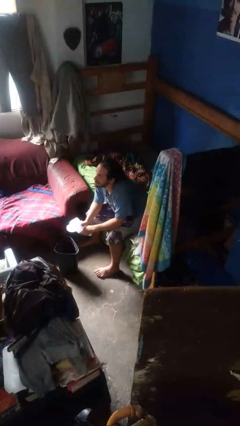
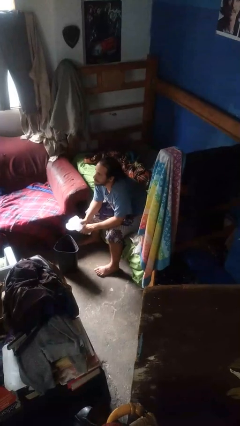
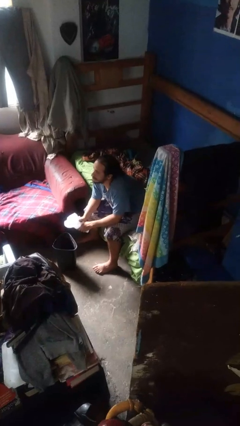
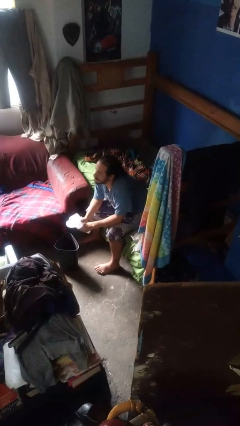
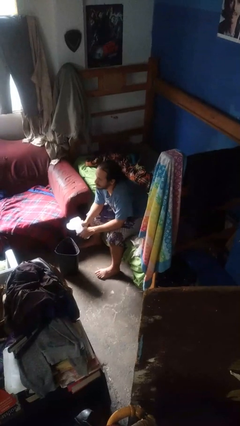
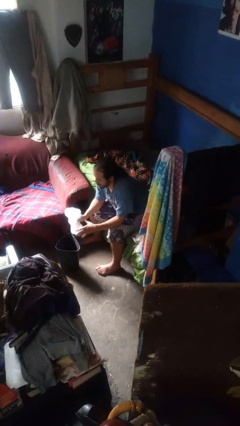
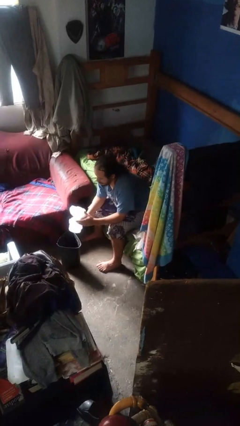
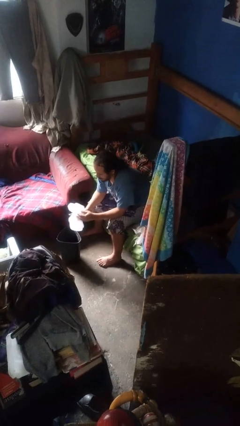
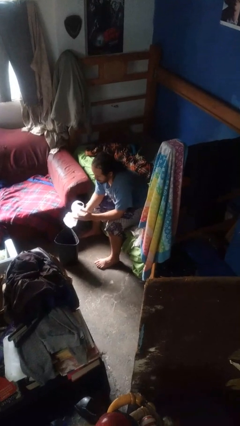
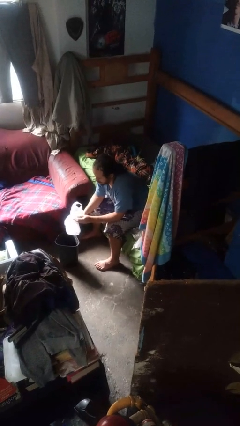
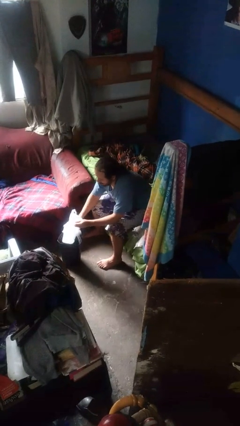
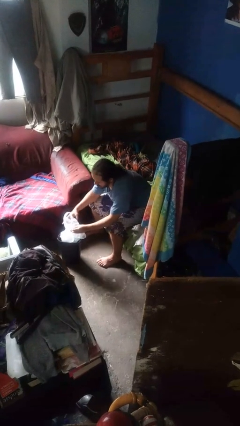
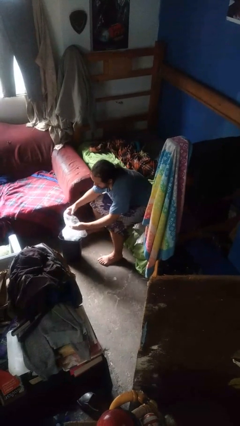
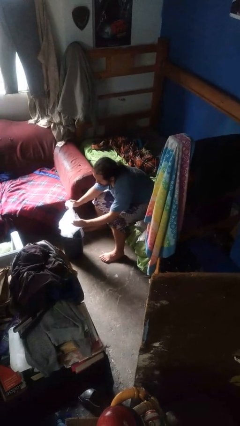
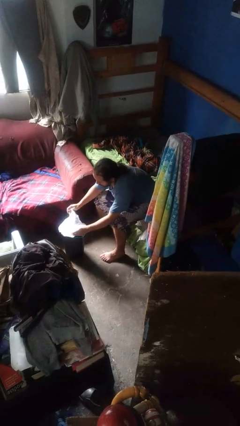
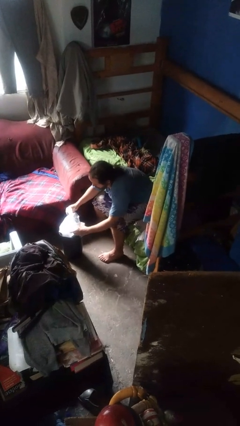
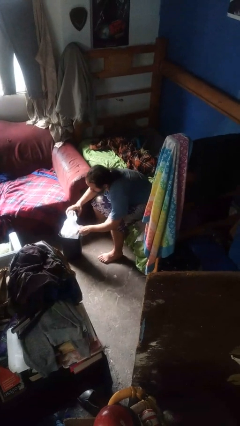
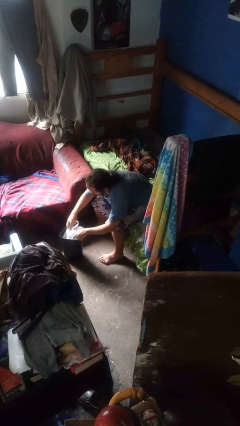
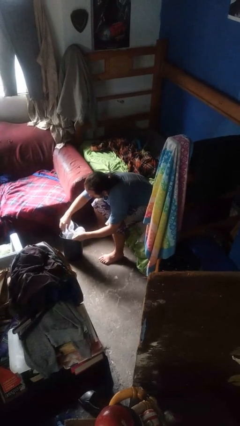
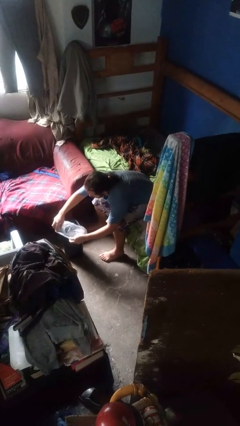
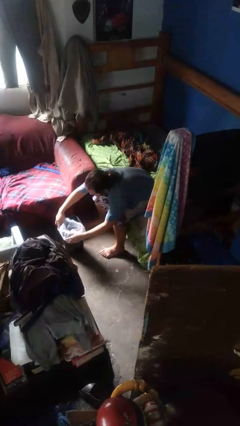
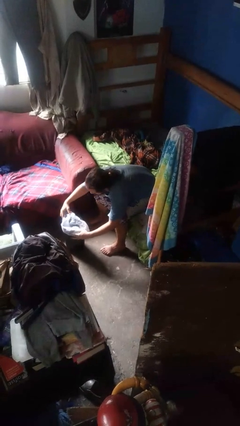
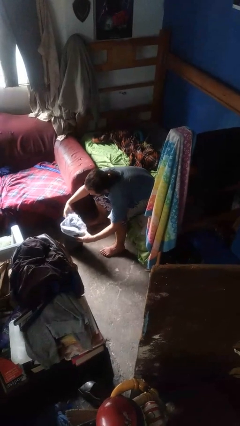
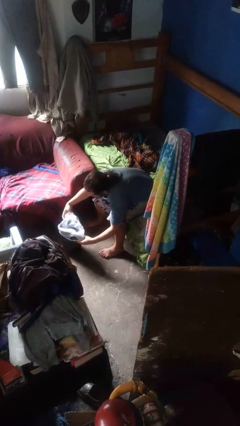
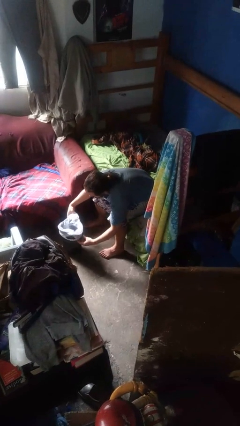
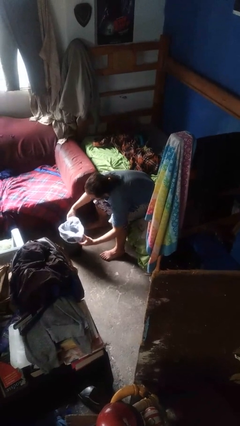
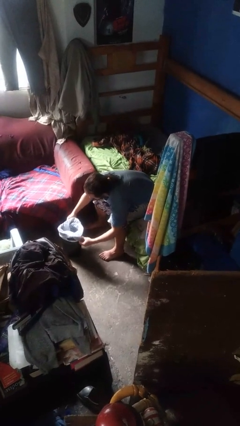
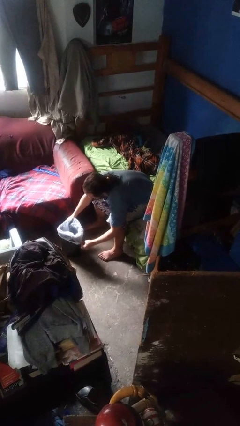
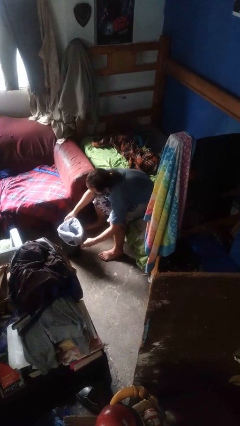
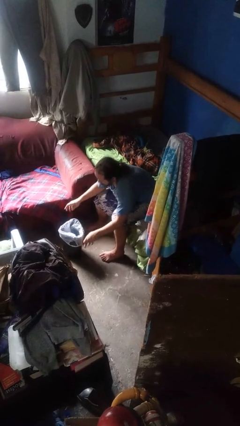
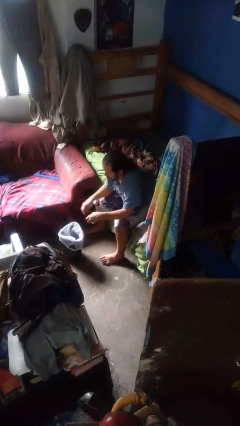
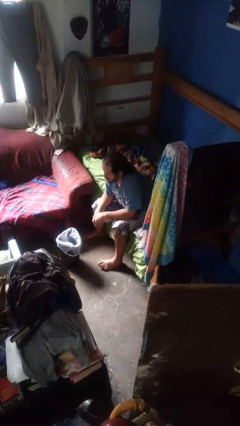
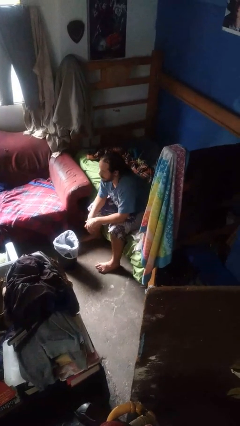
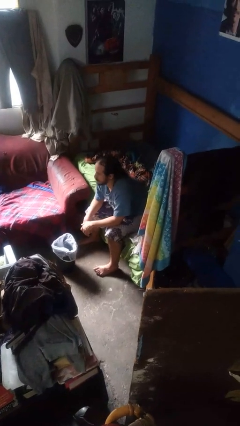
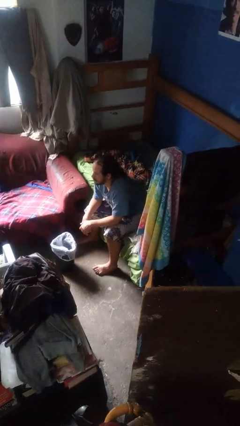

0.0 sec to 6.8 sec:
person inserts trashbag into trashcan

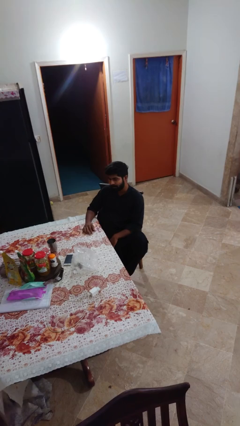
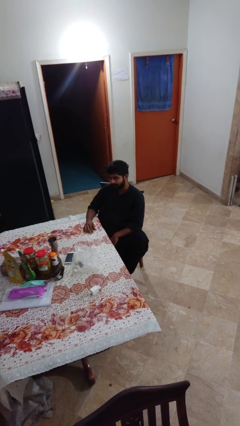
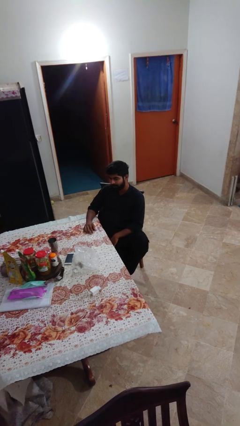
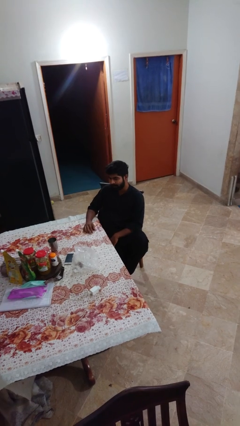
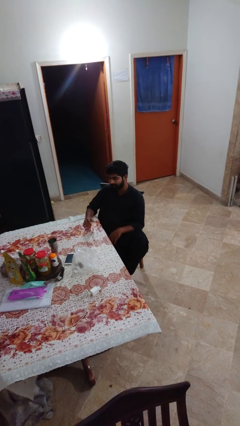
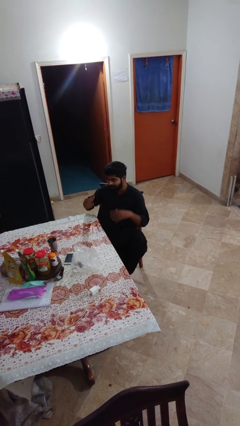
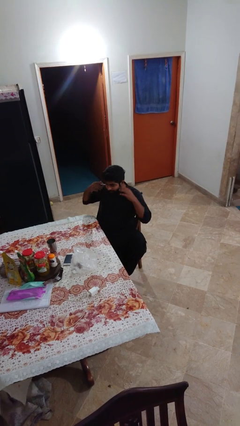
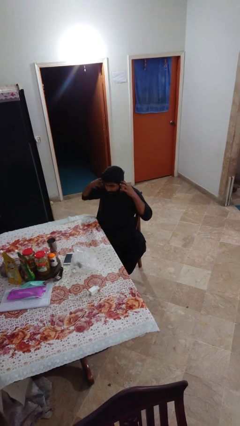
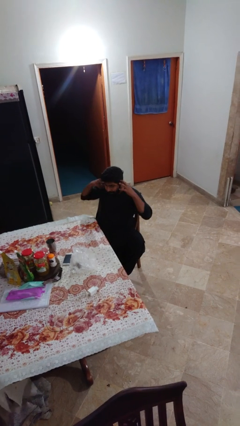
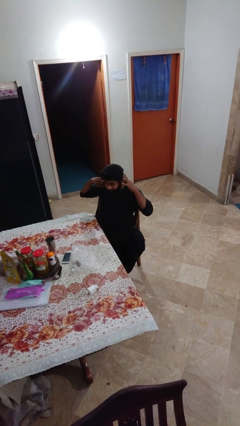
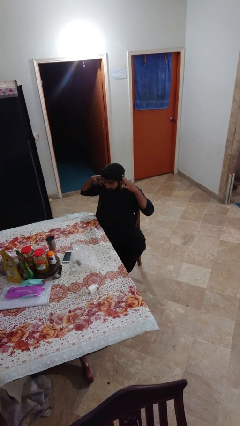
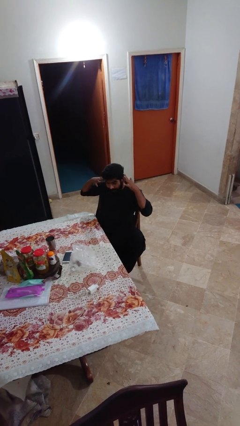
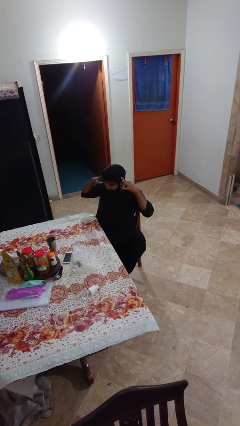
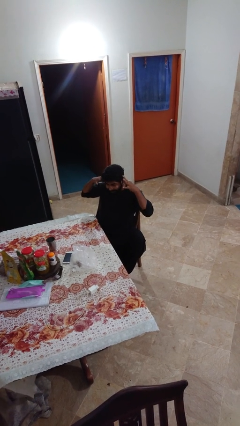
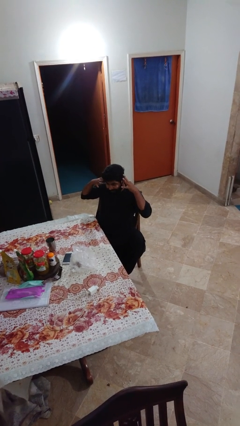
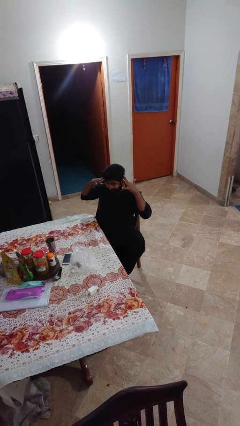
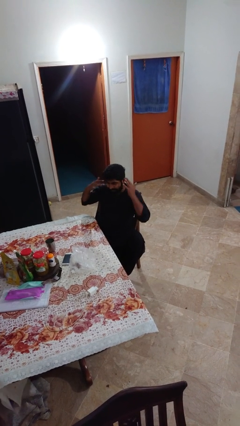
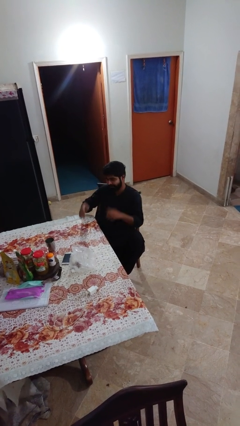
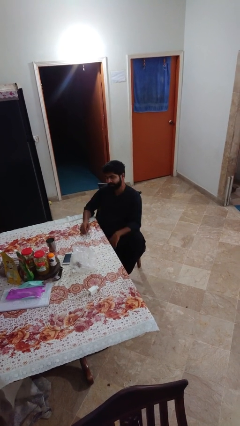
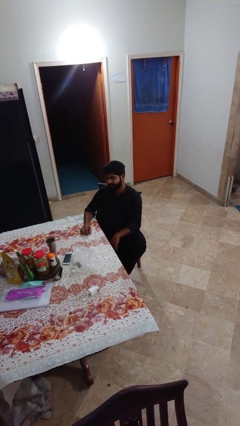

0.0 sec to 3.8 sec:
person puts fingers in ear

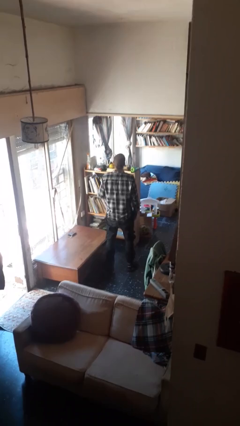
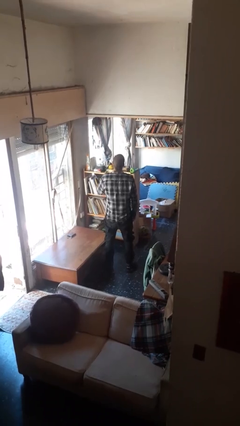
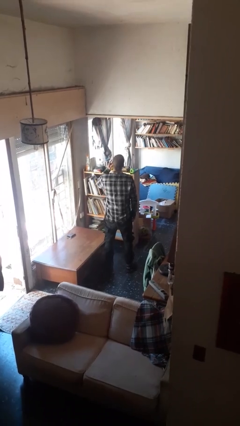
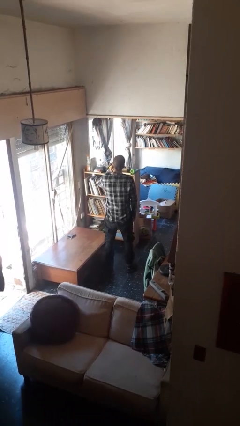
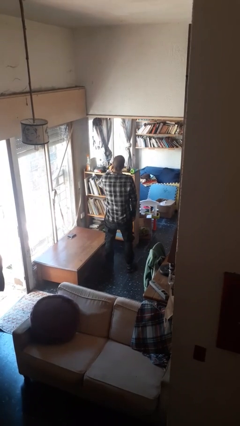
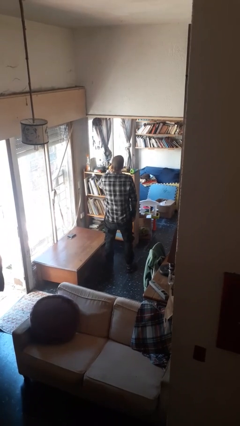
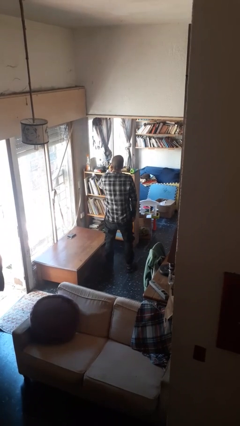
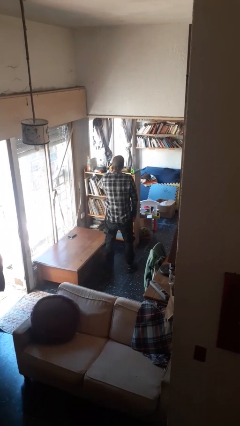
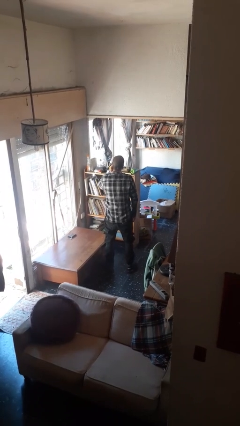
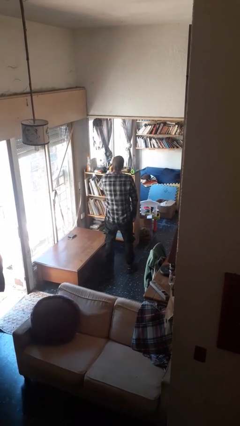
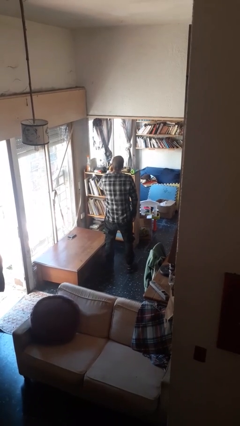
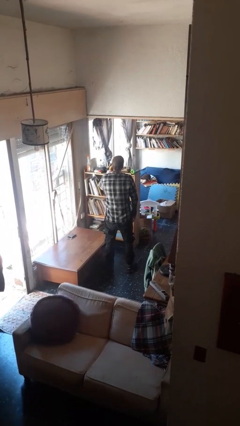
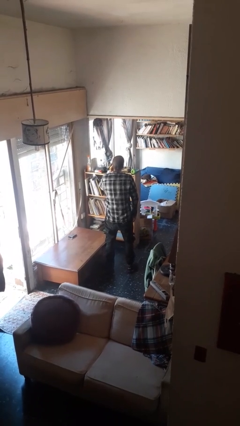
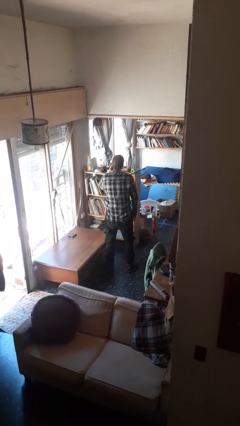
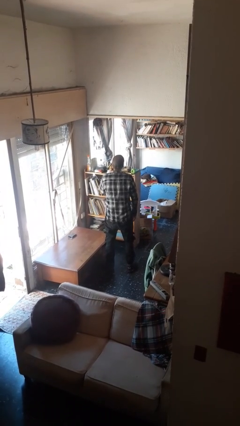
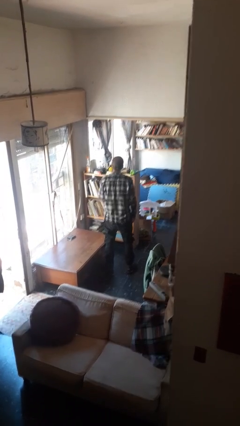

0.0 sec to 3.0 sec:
person gestures listen closely

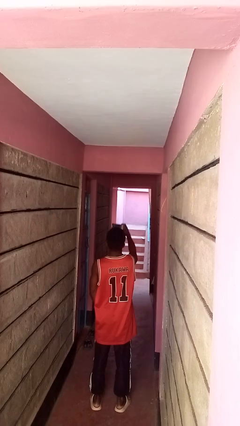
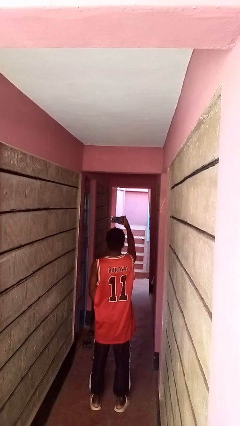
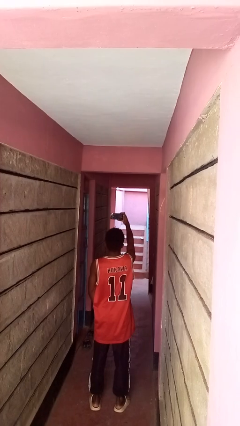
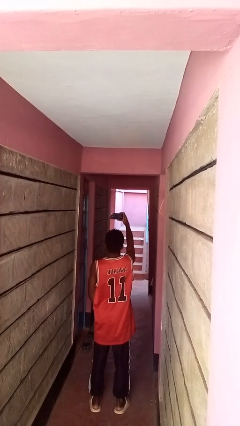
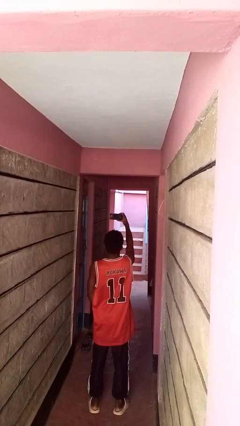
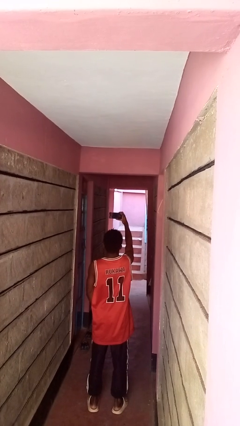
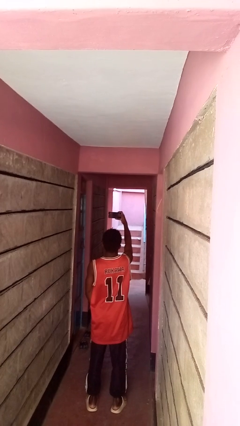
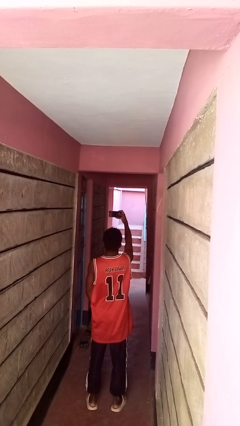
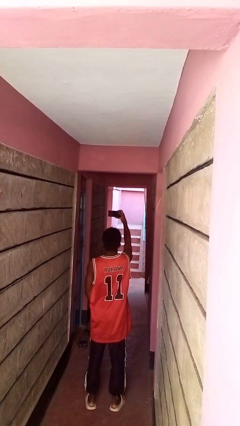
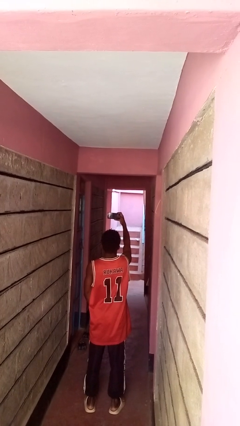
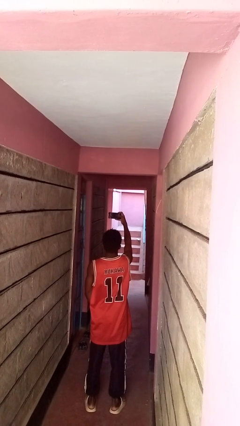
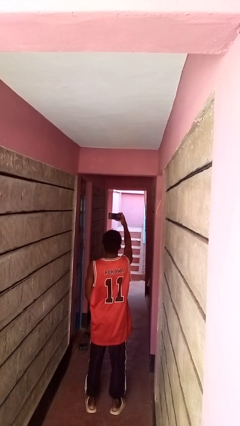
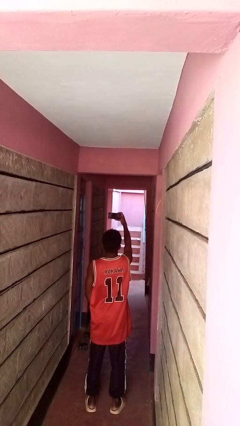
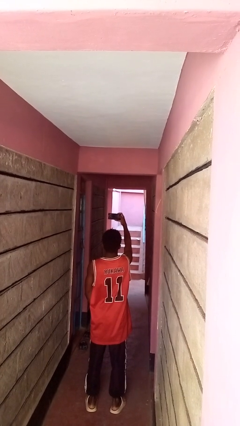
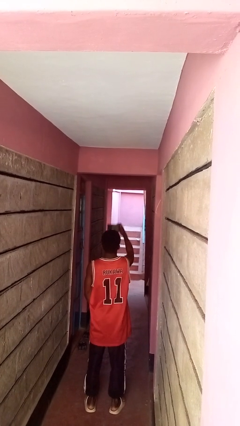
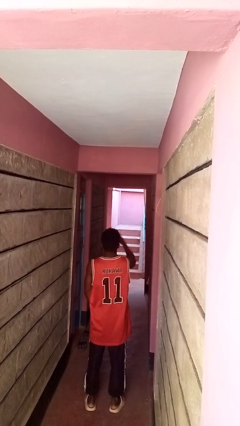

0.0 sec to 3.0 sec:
person takes selfie

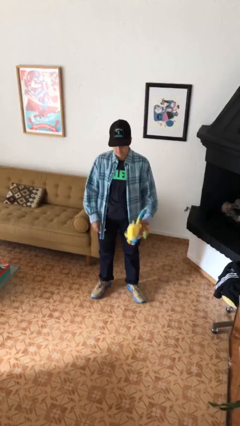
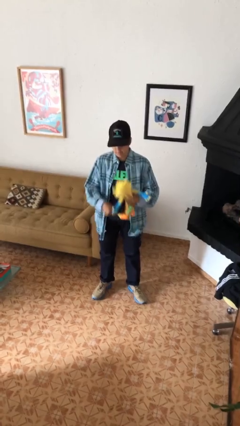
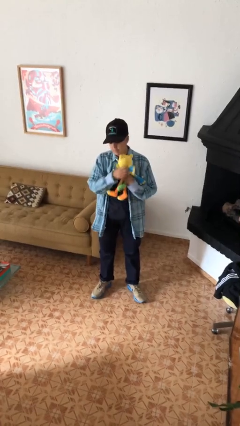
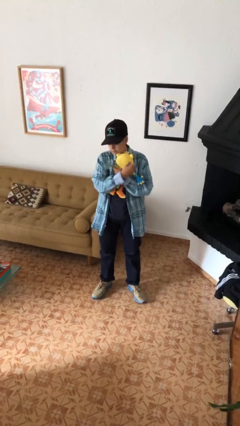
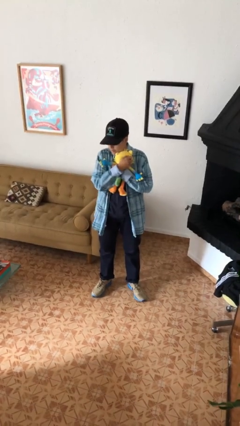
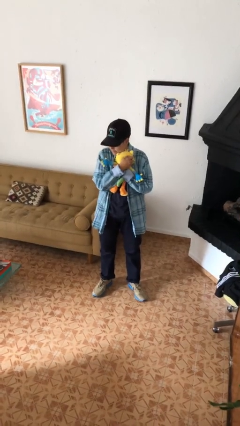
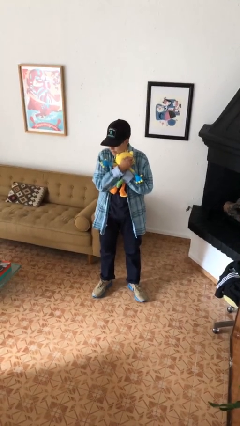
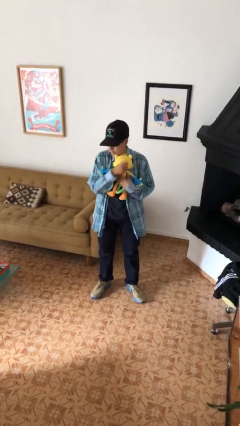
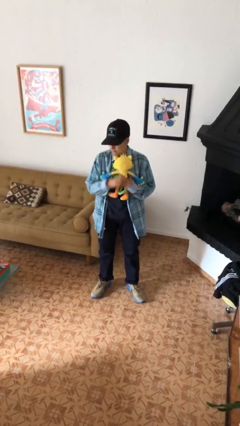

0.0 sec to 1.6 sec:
person hugs stuffed animal
